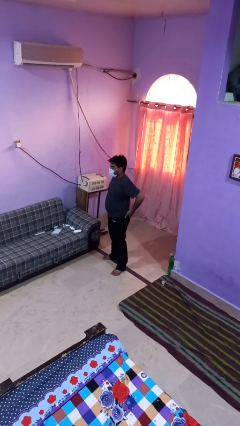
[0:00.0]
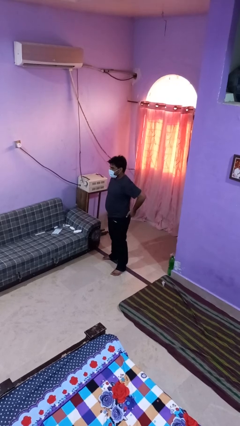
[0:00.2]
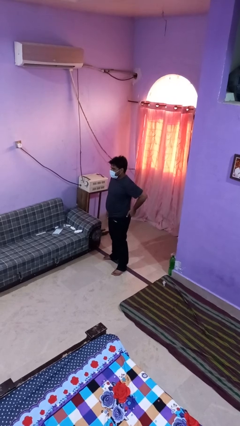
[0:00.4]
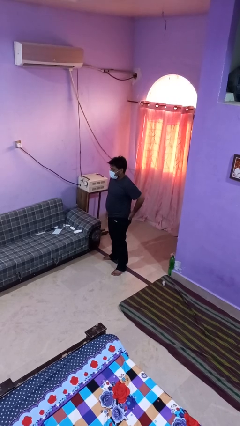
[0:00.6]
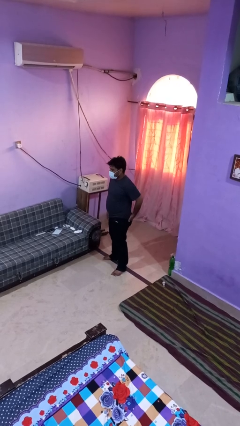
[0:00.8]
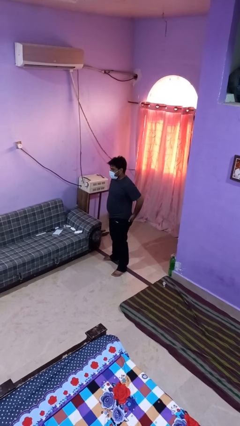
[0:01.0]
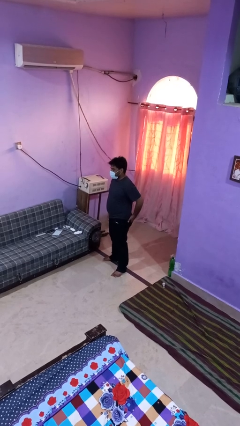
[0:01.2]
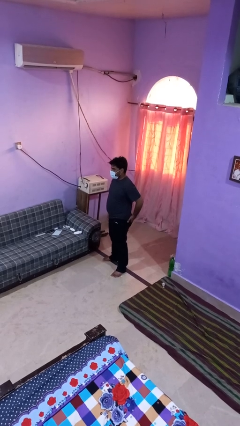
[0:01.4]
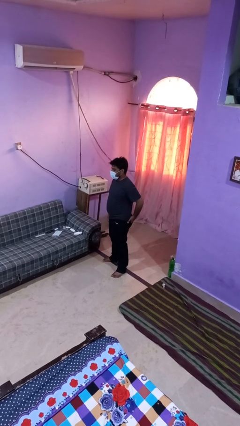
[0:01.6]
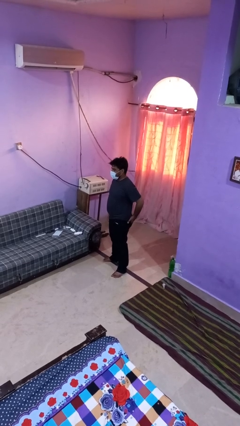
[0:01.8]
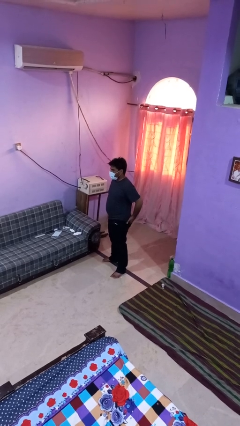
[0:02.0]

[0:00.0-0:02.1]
person puts hands in back pockets

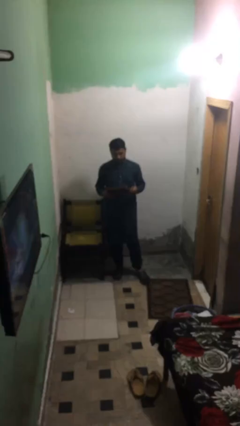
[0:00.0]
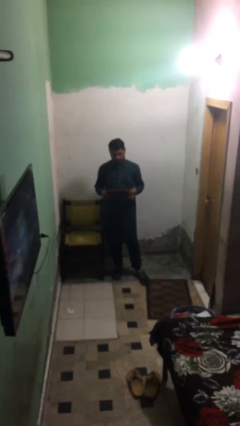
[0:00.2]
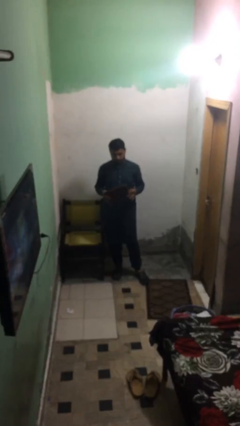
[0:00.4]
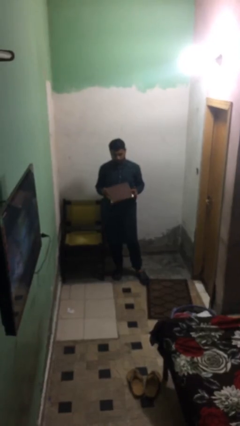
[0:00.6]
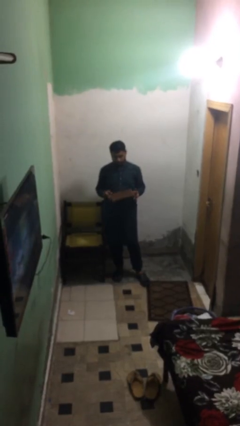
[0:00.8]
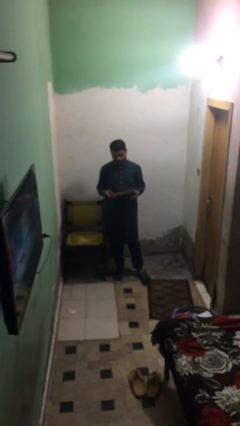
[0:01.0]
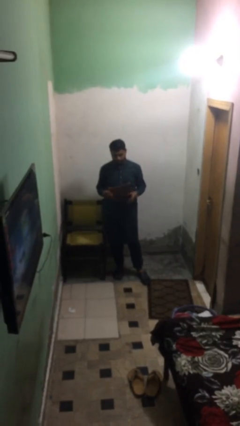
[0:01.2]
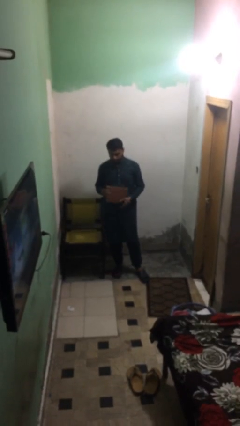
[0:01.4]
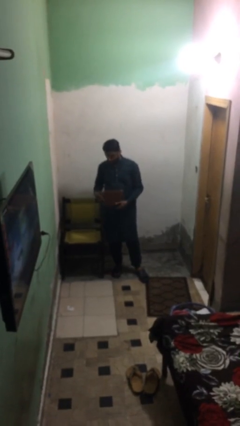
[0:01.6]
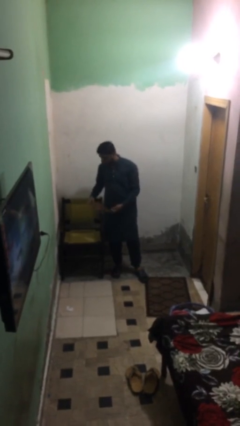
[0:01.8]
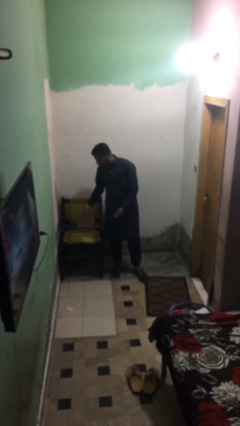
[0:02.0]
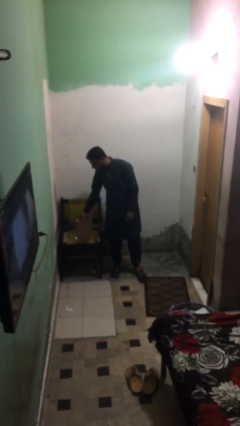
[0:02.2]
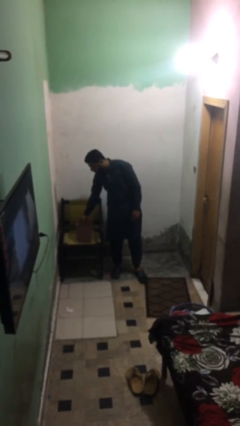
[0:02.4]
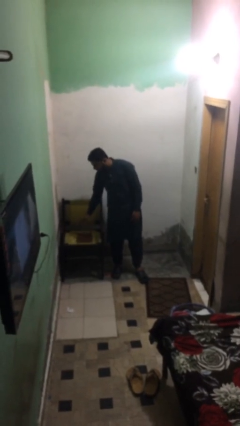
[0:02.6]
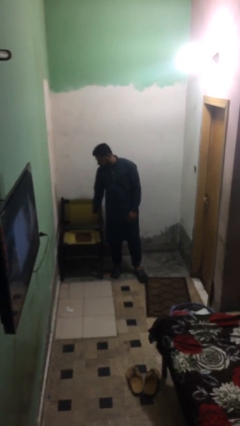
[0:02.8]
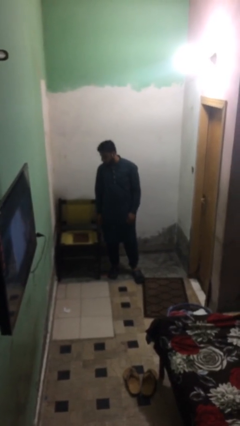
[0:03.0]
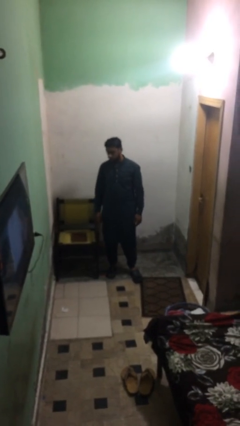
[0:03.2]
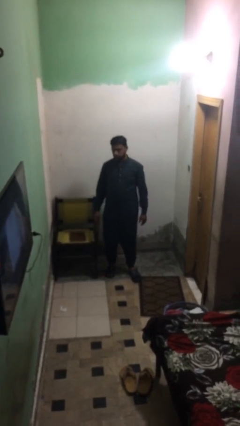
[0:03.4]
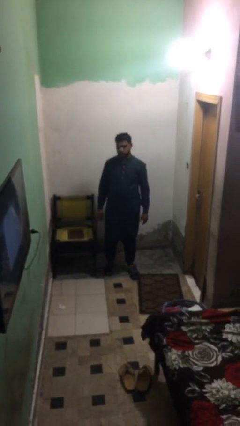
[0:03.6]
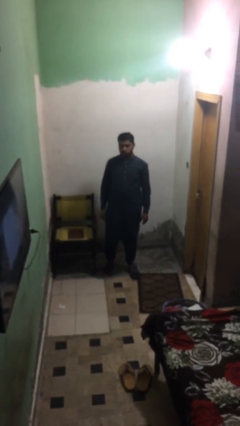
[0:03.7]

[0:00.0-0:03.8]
person puts down object on table

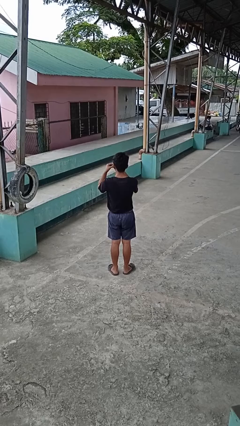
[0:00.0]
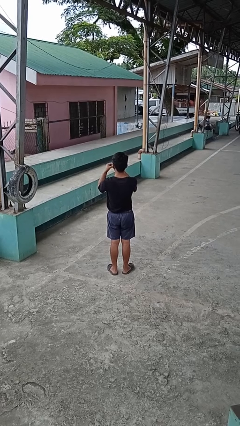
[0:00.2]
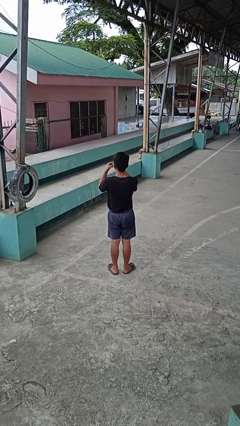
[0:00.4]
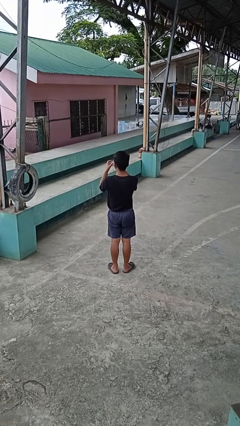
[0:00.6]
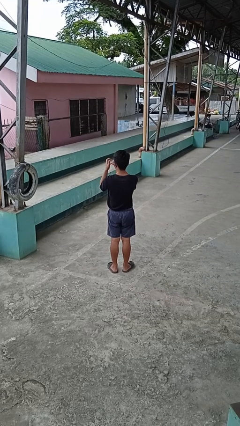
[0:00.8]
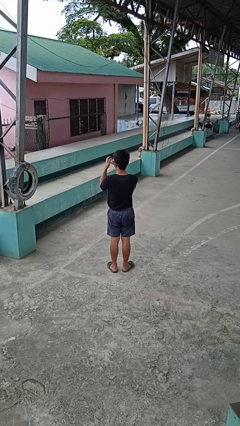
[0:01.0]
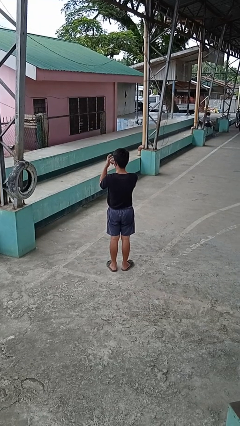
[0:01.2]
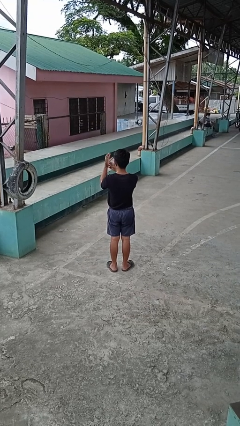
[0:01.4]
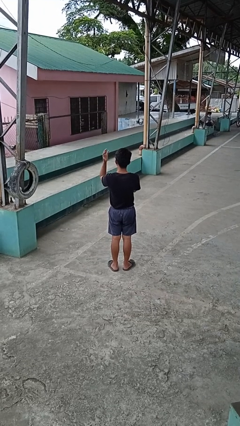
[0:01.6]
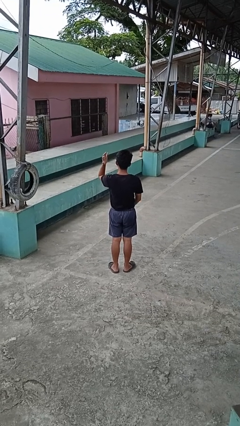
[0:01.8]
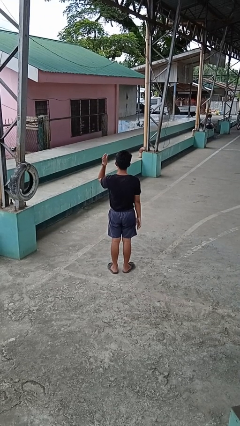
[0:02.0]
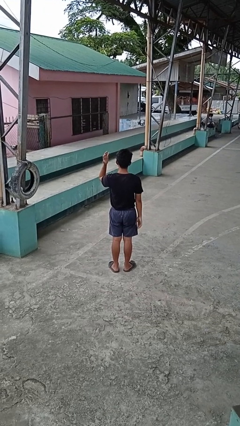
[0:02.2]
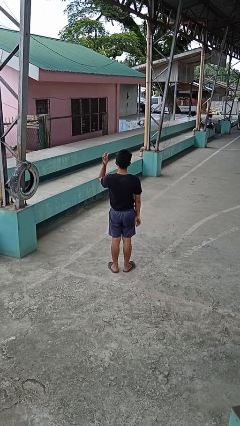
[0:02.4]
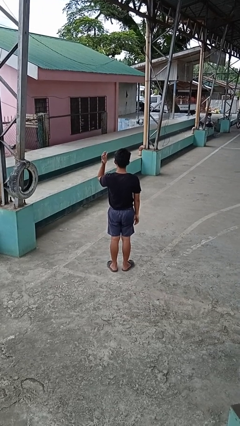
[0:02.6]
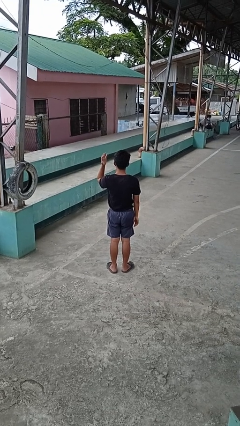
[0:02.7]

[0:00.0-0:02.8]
person puts on ring

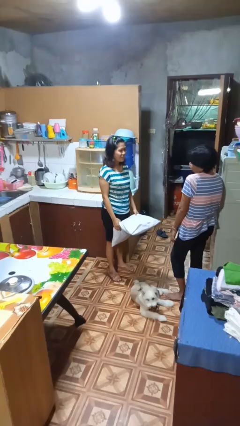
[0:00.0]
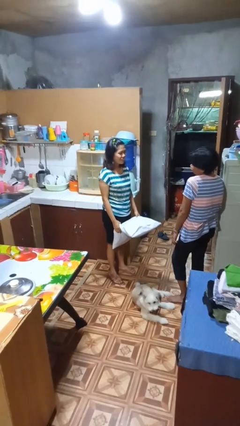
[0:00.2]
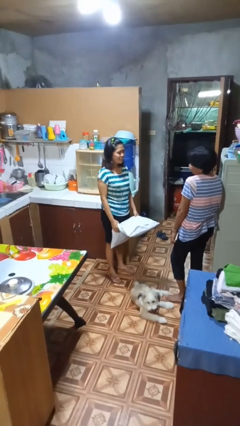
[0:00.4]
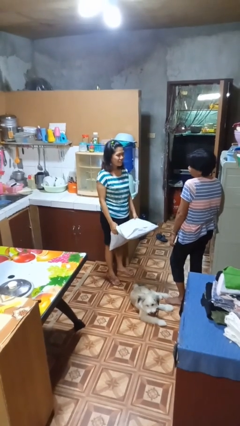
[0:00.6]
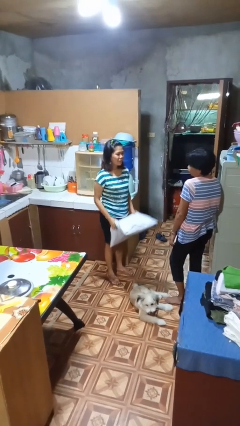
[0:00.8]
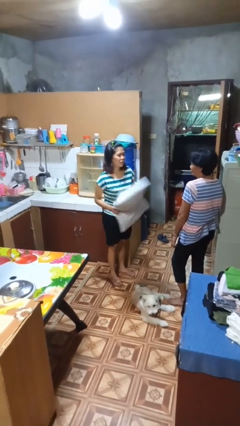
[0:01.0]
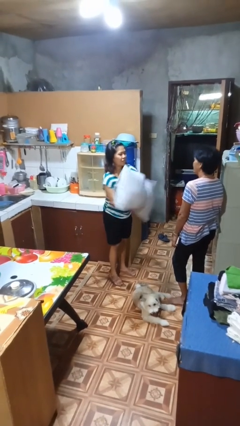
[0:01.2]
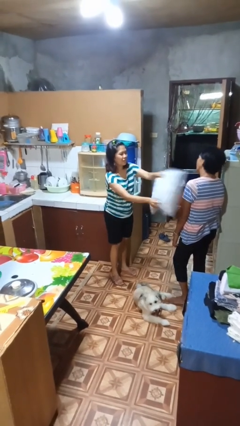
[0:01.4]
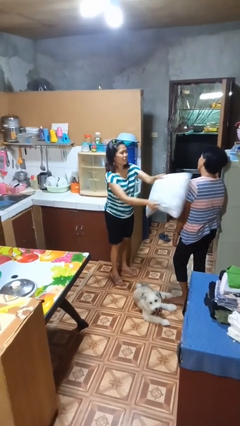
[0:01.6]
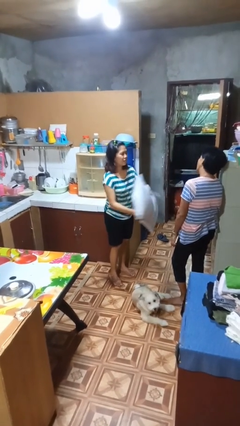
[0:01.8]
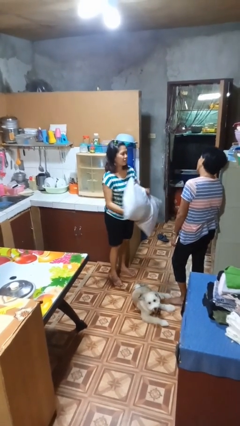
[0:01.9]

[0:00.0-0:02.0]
person hits person with pillow

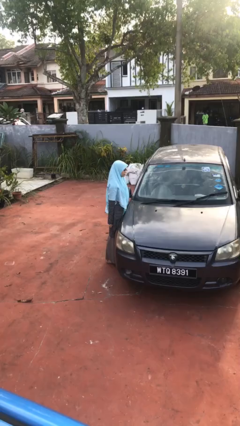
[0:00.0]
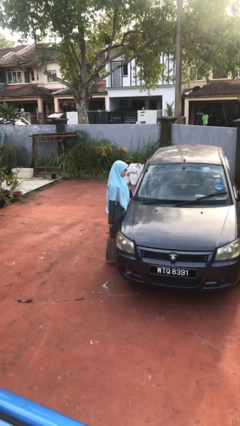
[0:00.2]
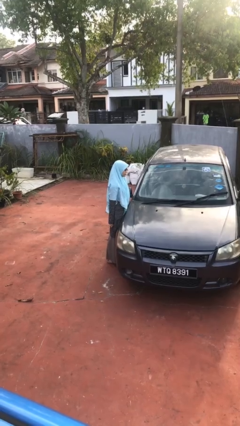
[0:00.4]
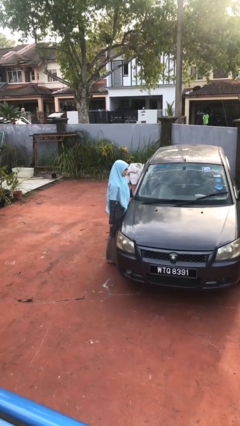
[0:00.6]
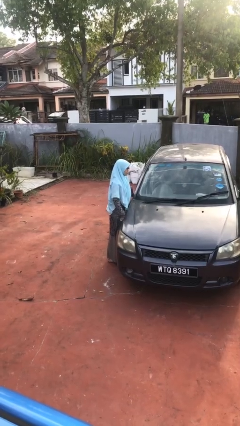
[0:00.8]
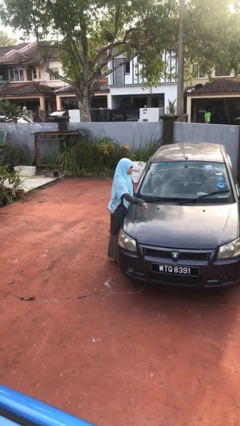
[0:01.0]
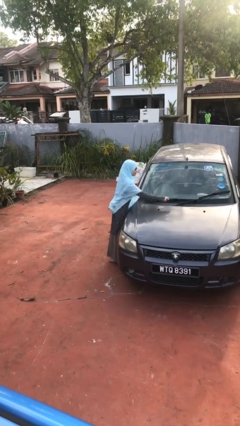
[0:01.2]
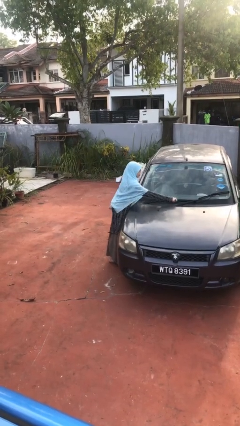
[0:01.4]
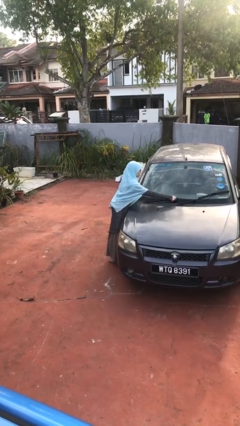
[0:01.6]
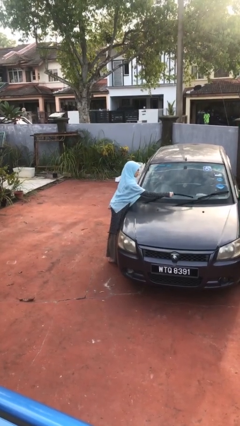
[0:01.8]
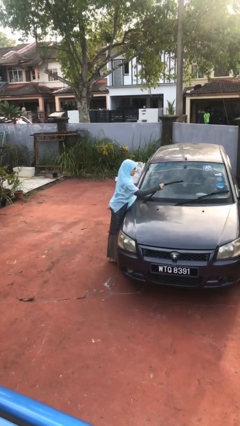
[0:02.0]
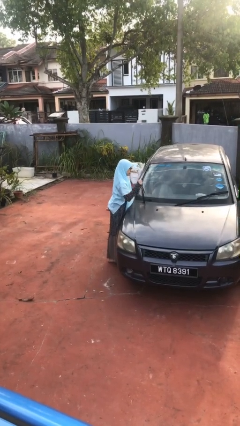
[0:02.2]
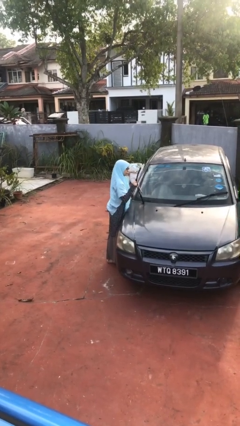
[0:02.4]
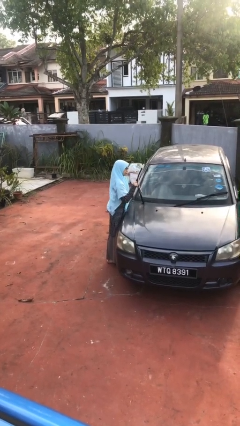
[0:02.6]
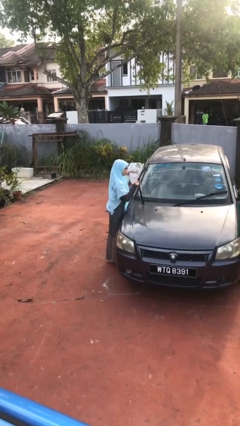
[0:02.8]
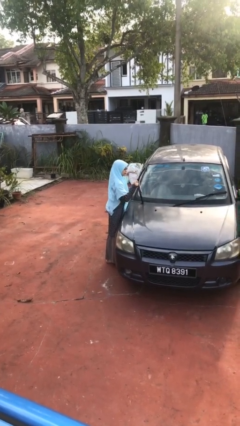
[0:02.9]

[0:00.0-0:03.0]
person flips up car wipers

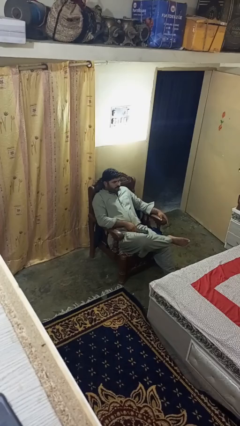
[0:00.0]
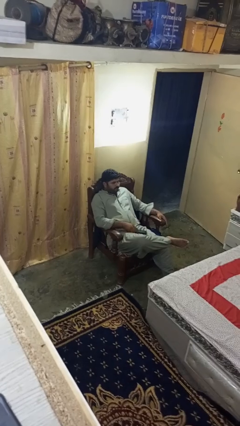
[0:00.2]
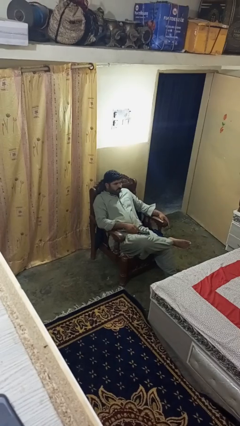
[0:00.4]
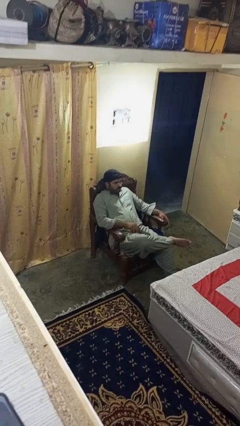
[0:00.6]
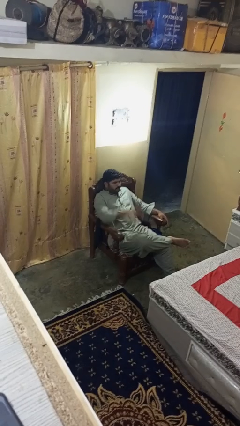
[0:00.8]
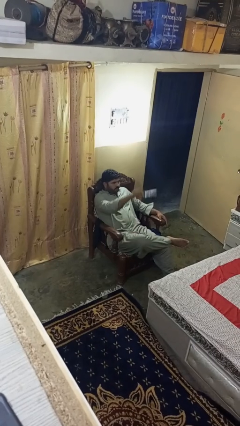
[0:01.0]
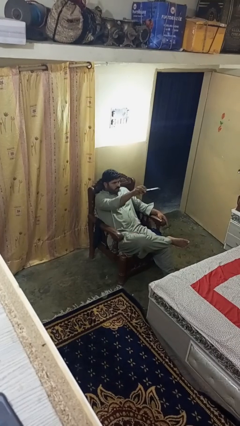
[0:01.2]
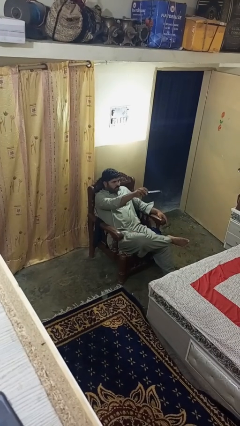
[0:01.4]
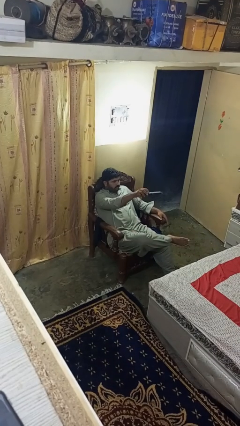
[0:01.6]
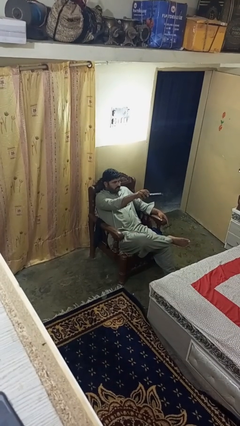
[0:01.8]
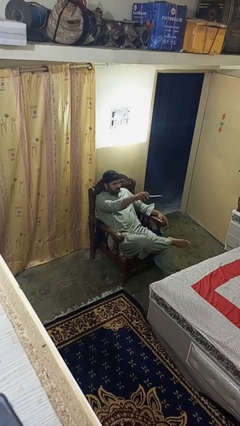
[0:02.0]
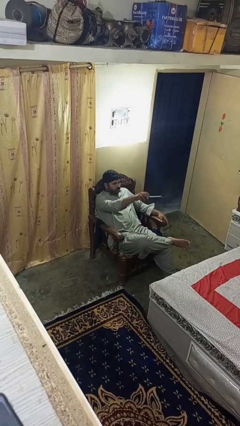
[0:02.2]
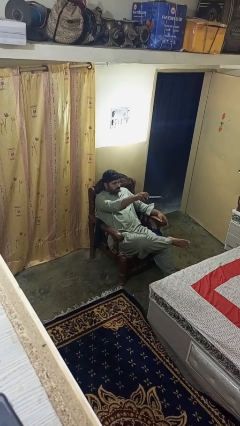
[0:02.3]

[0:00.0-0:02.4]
person uses television remote

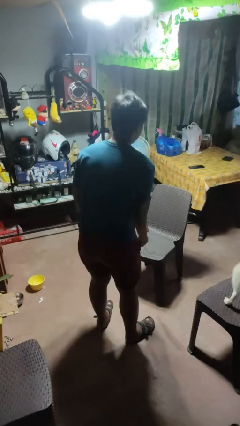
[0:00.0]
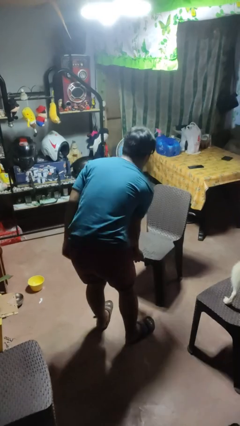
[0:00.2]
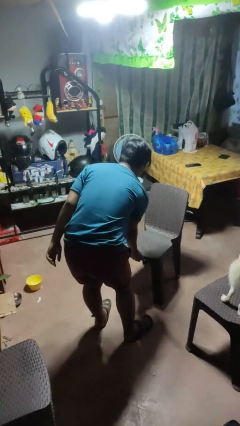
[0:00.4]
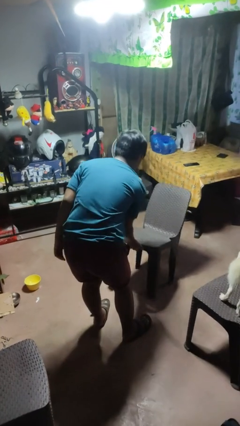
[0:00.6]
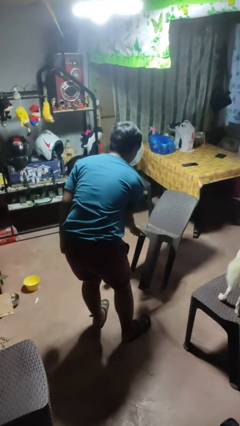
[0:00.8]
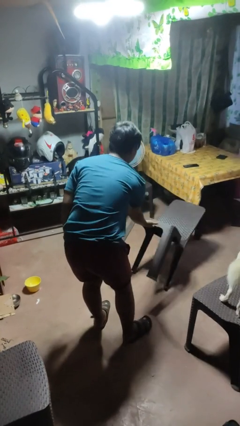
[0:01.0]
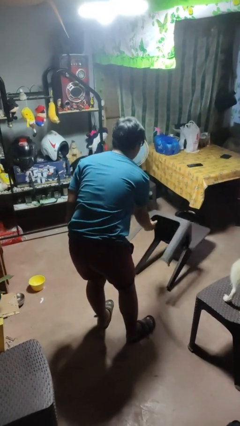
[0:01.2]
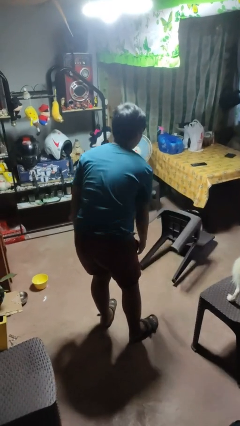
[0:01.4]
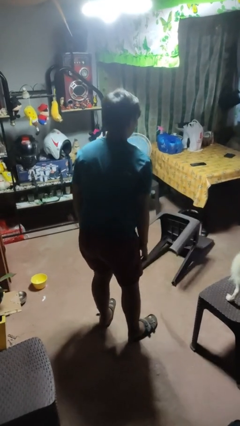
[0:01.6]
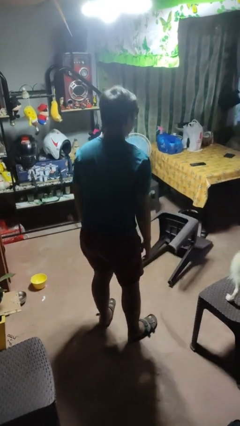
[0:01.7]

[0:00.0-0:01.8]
person knocks over furniture
